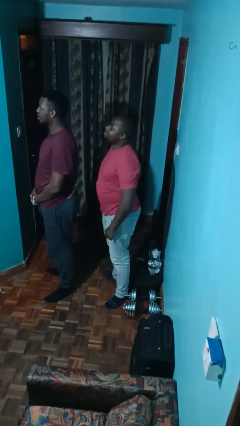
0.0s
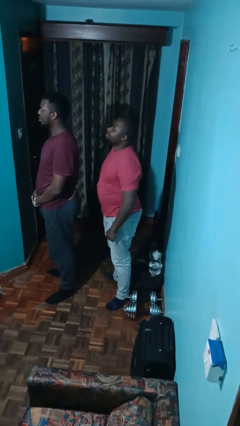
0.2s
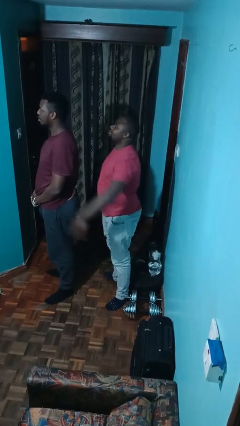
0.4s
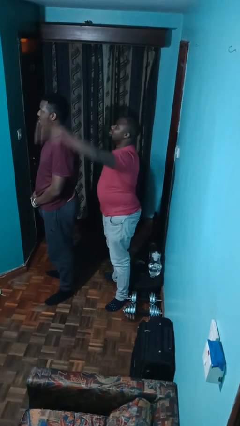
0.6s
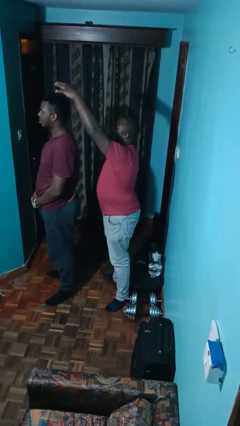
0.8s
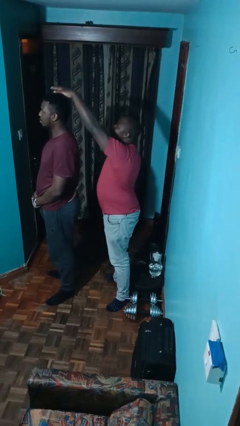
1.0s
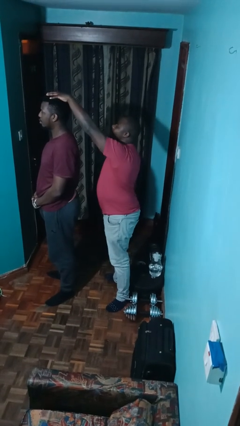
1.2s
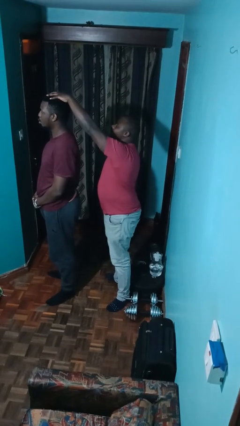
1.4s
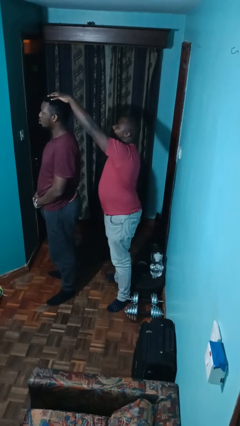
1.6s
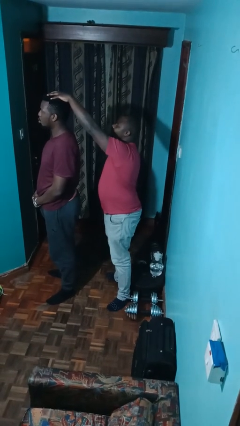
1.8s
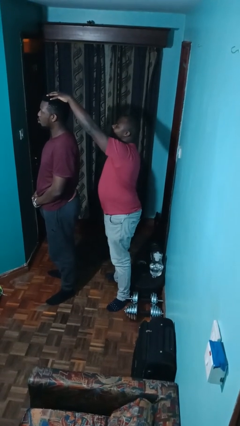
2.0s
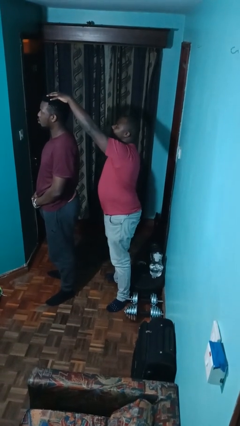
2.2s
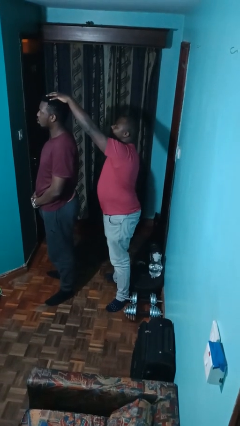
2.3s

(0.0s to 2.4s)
person grabs person by hair

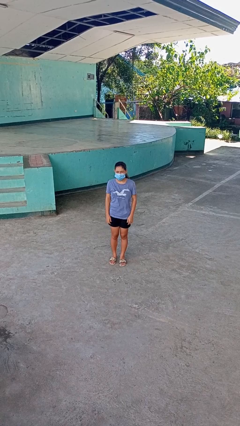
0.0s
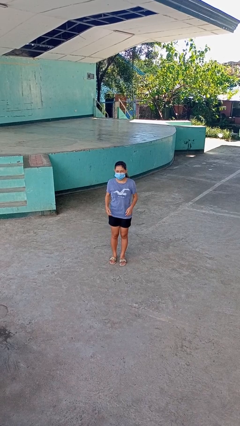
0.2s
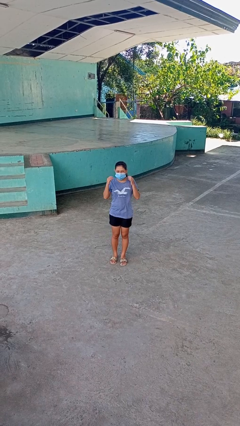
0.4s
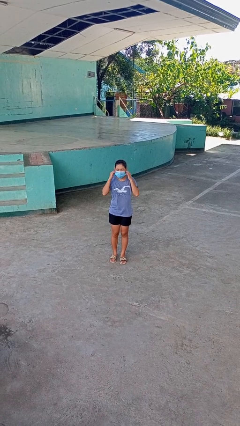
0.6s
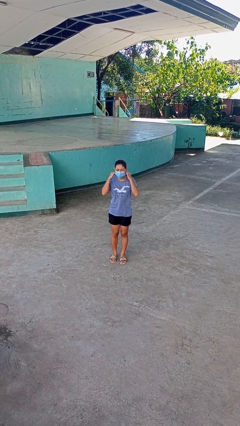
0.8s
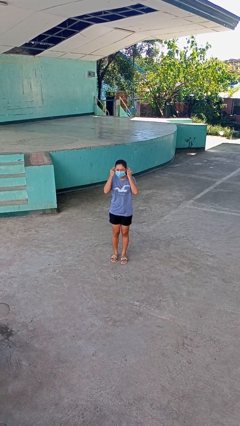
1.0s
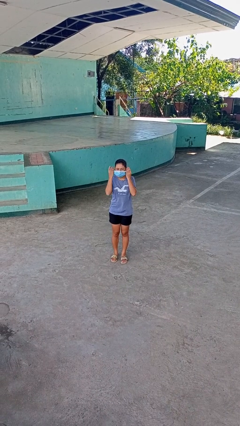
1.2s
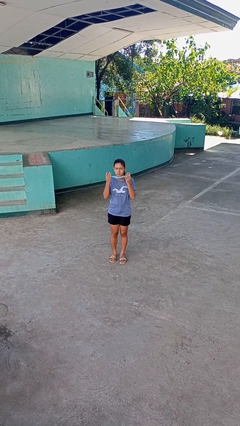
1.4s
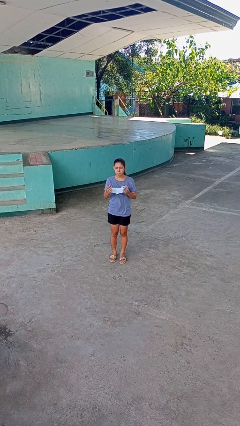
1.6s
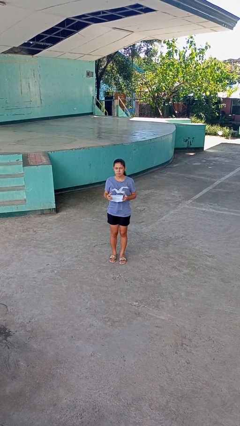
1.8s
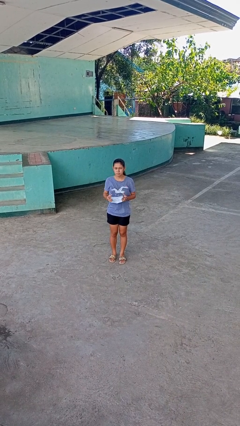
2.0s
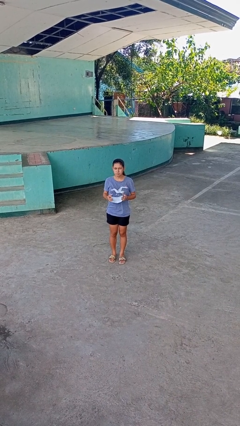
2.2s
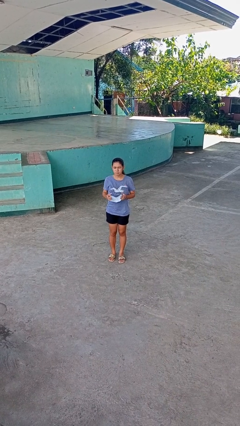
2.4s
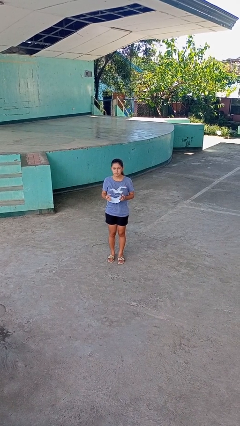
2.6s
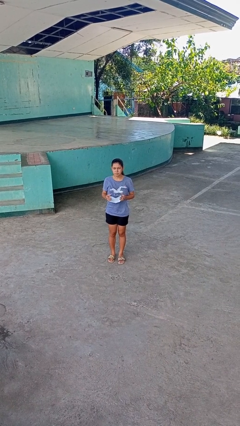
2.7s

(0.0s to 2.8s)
person takes off facemask

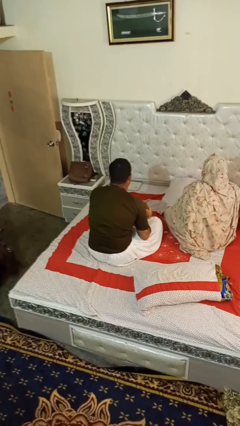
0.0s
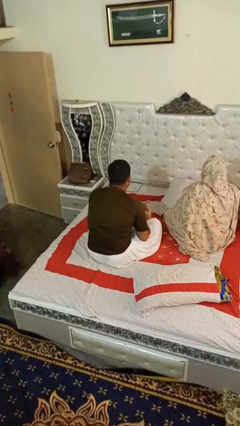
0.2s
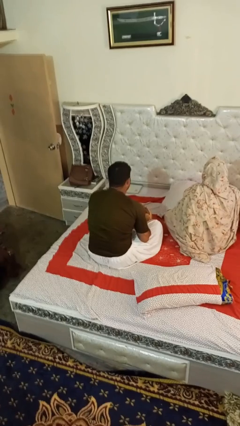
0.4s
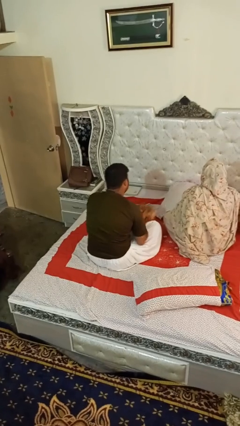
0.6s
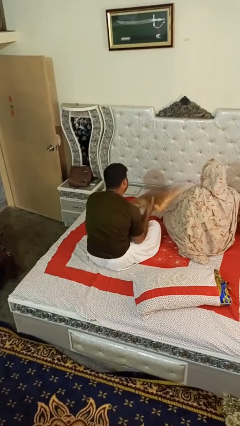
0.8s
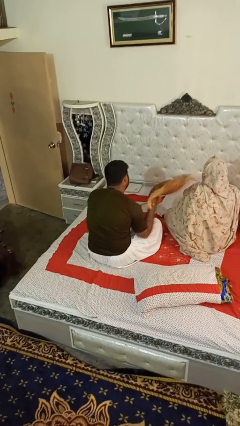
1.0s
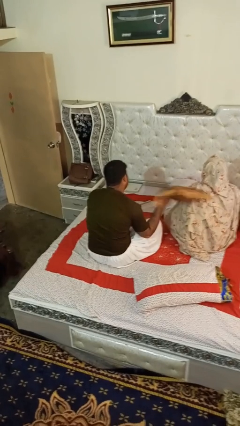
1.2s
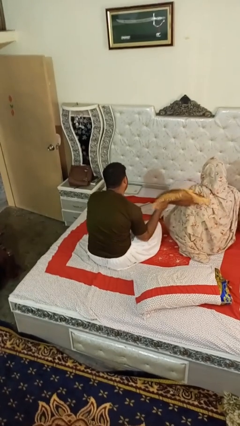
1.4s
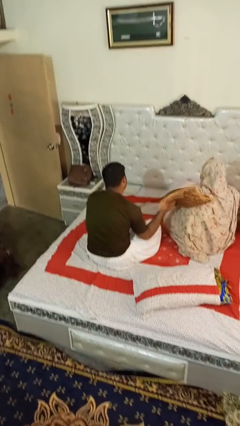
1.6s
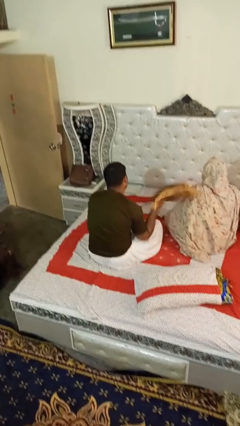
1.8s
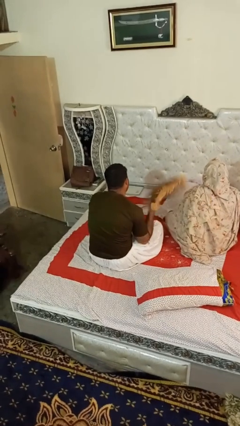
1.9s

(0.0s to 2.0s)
person hits person with pillow

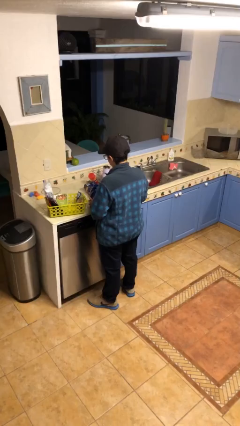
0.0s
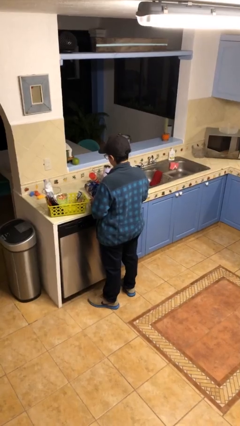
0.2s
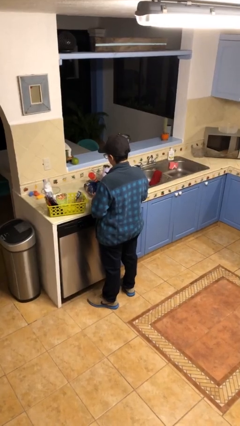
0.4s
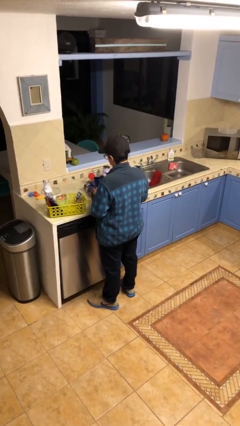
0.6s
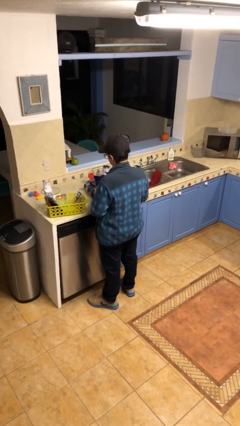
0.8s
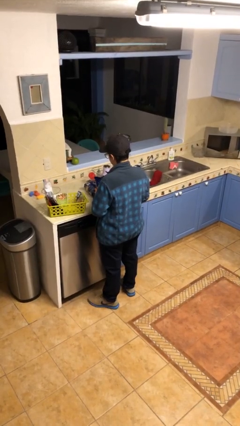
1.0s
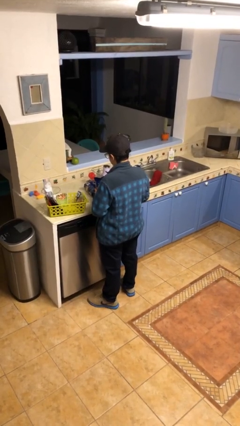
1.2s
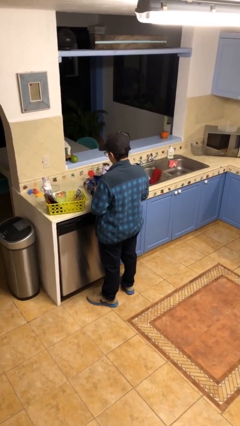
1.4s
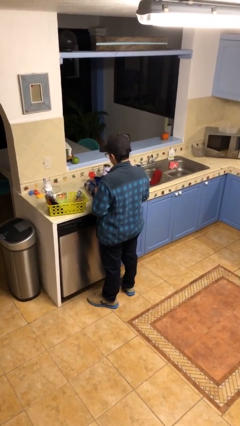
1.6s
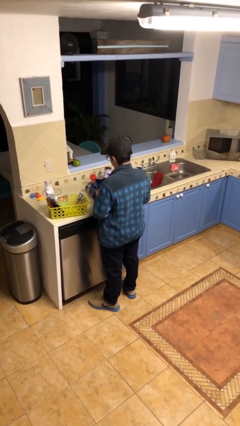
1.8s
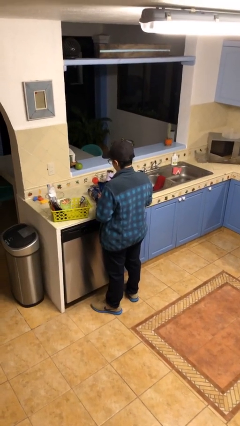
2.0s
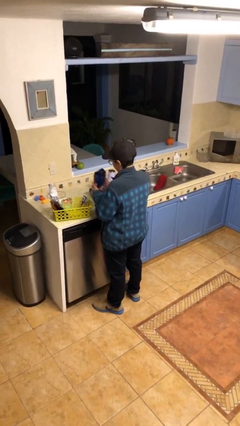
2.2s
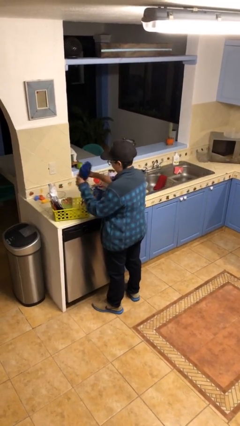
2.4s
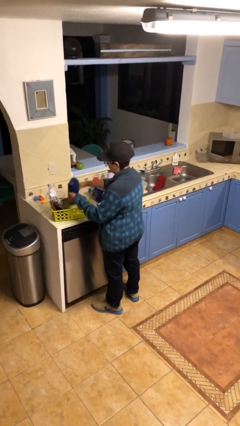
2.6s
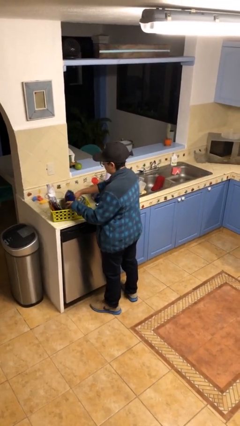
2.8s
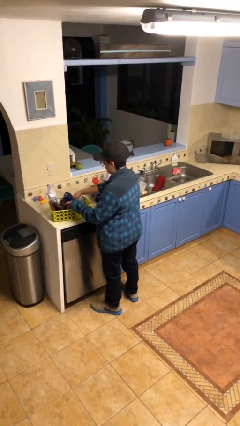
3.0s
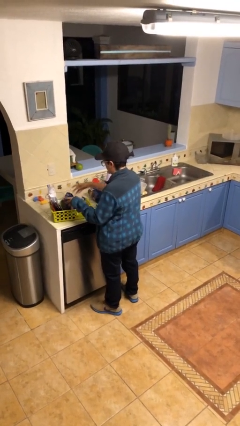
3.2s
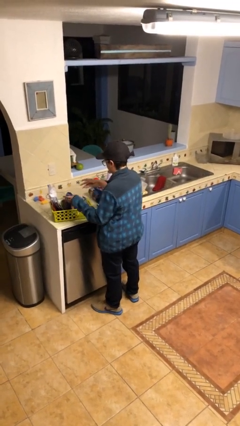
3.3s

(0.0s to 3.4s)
person puts object into basket

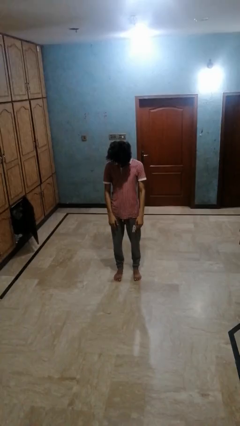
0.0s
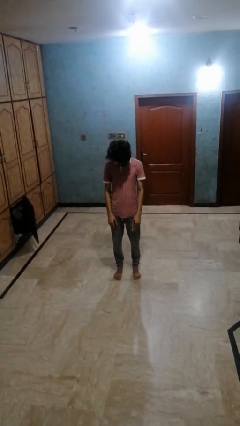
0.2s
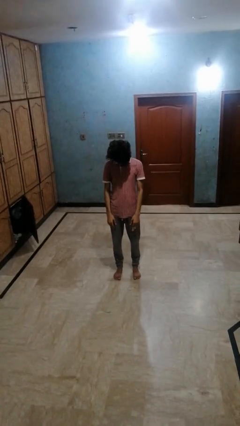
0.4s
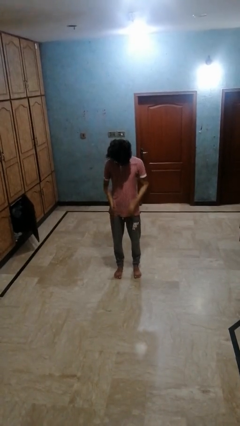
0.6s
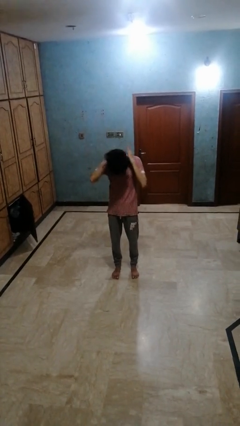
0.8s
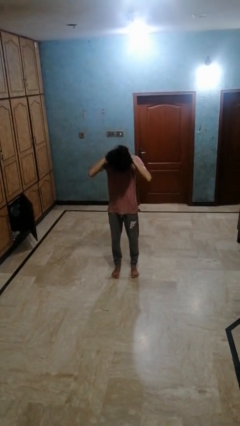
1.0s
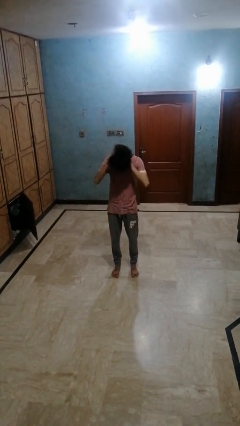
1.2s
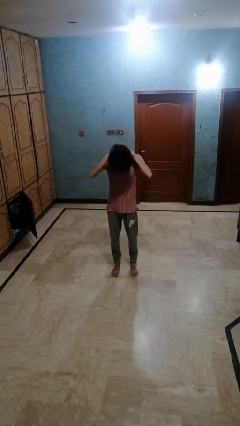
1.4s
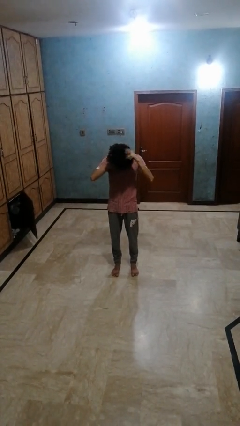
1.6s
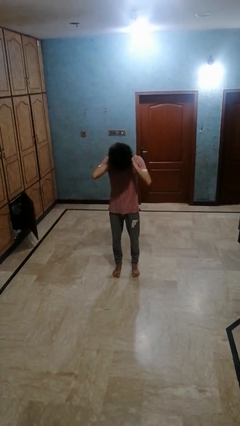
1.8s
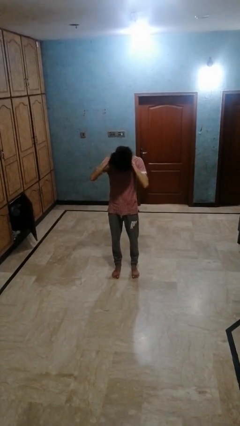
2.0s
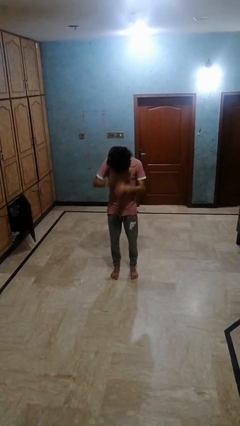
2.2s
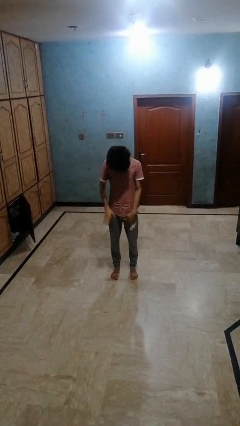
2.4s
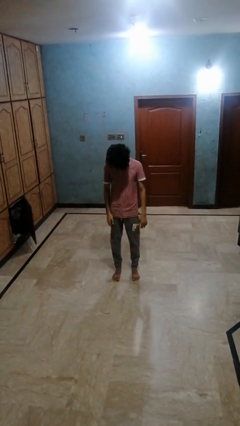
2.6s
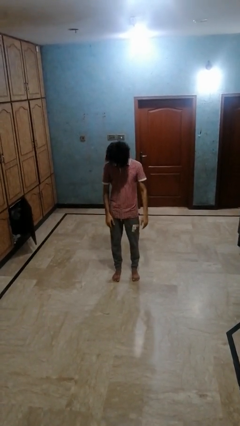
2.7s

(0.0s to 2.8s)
person rubs neck

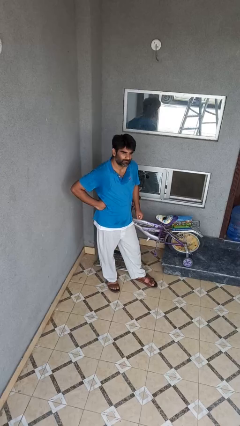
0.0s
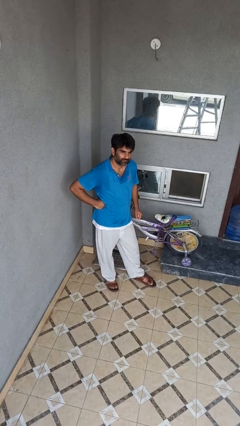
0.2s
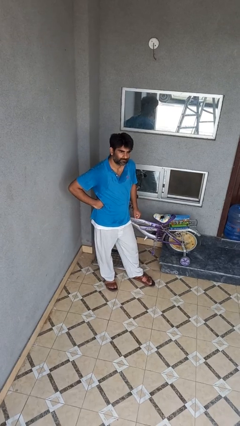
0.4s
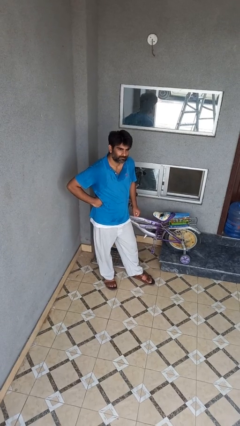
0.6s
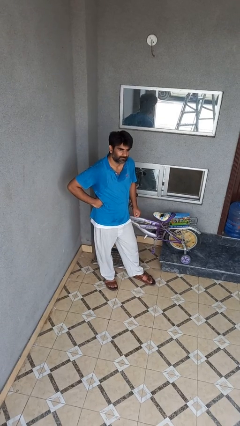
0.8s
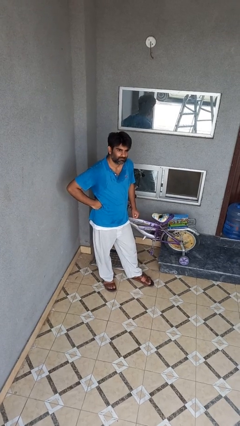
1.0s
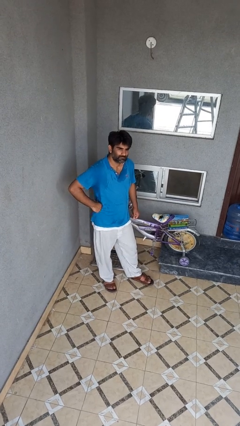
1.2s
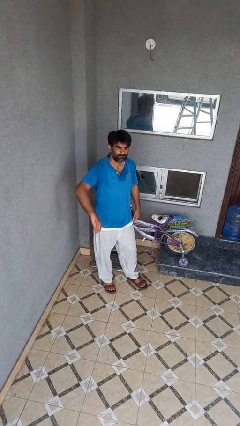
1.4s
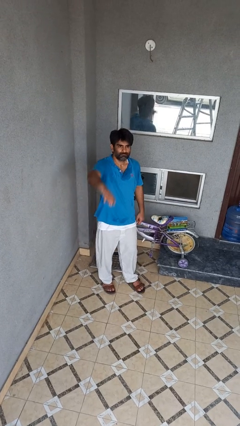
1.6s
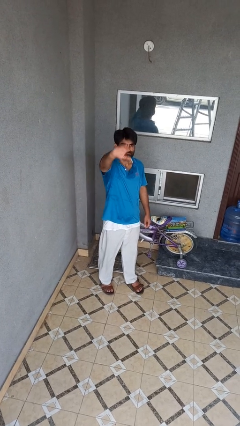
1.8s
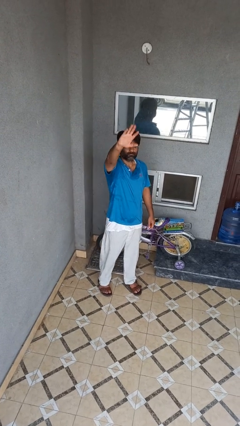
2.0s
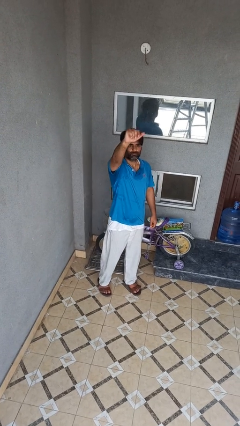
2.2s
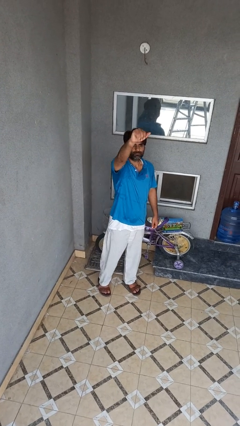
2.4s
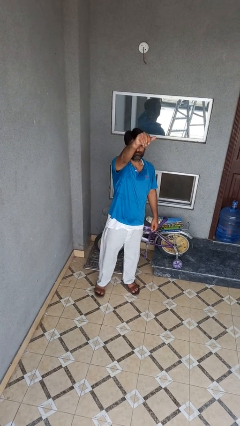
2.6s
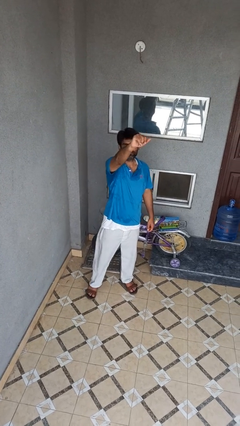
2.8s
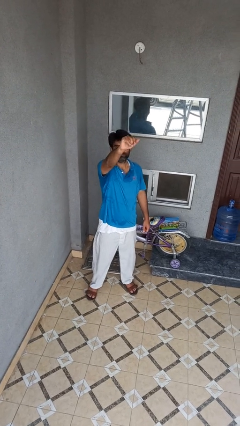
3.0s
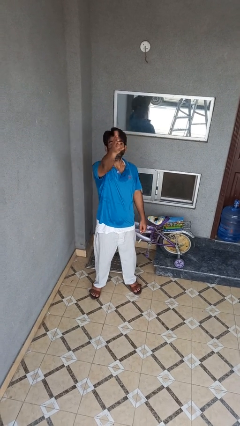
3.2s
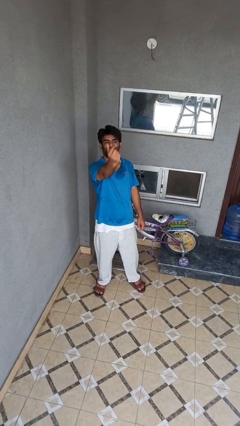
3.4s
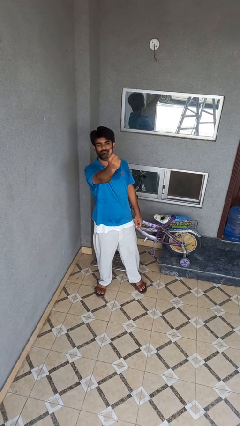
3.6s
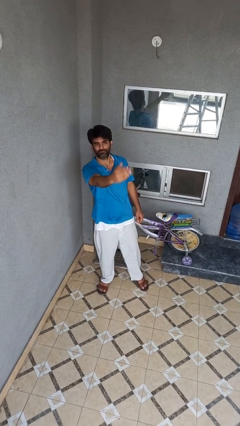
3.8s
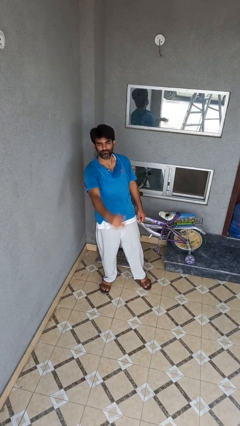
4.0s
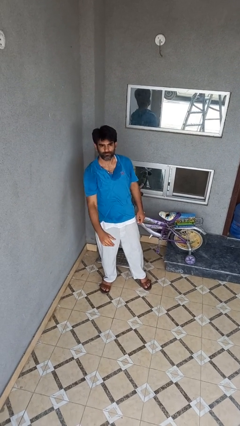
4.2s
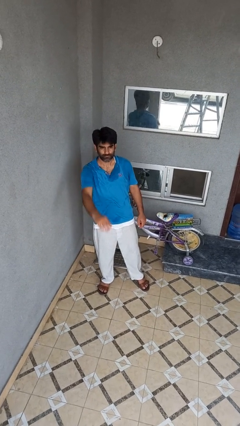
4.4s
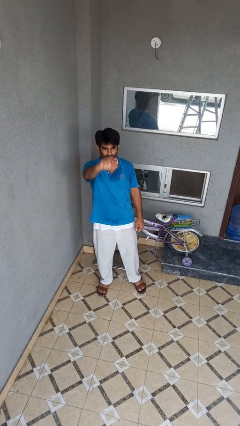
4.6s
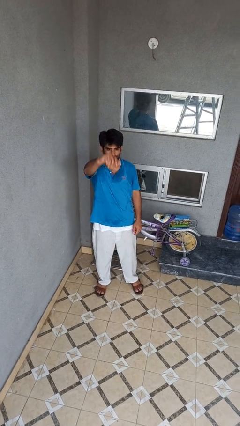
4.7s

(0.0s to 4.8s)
person gestures come here
